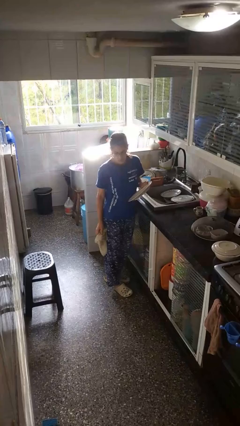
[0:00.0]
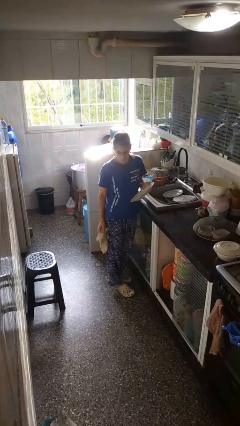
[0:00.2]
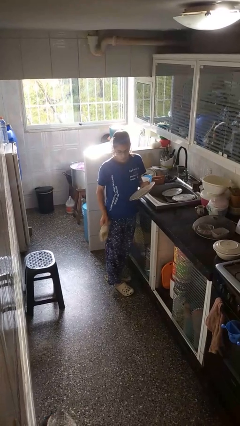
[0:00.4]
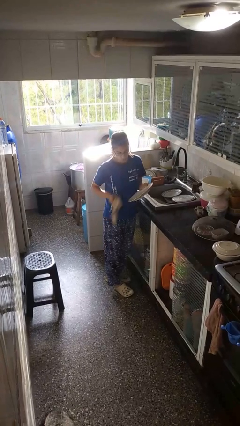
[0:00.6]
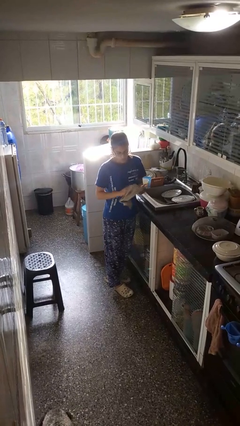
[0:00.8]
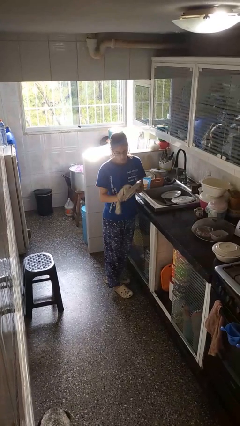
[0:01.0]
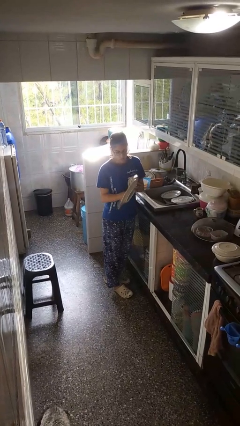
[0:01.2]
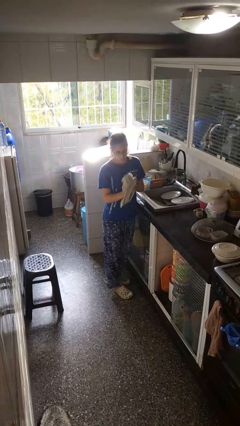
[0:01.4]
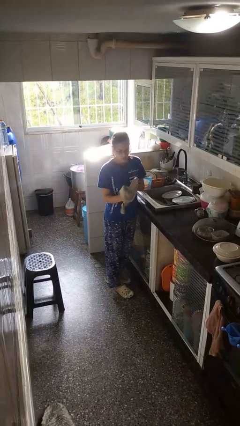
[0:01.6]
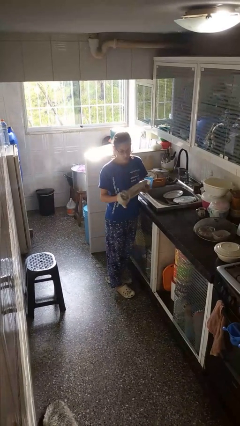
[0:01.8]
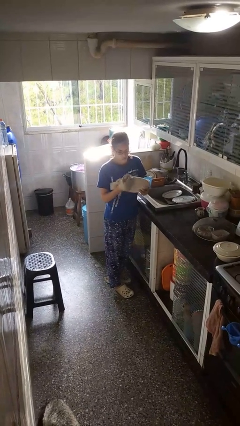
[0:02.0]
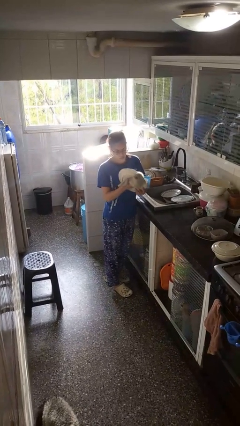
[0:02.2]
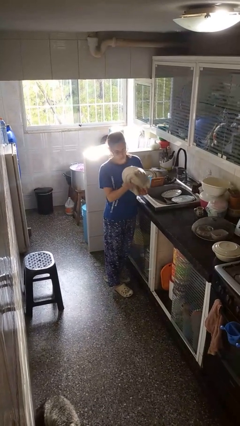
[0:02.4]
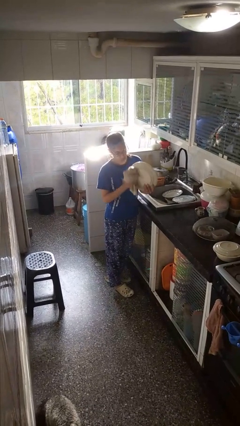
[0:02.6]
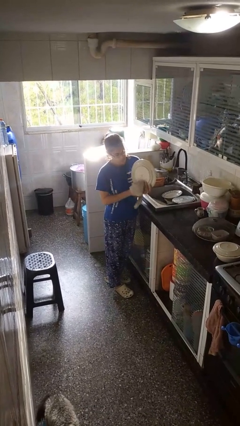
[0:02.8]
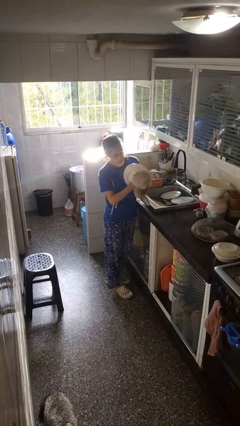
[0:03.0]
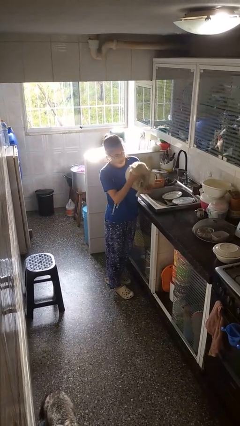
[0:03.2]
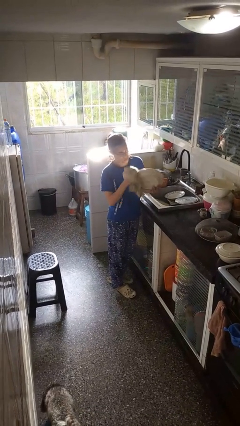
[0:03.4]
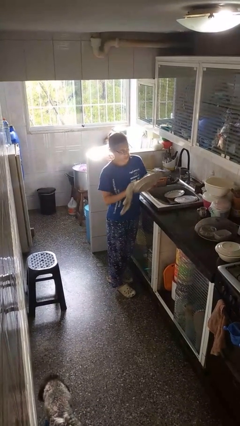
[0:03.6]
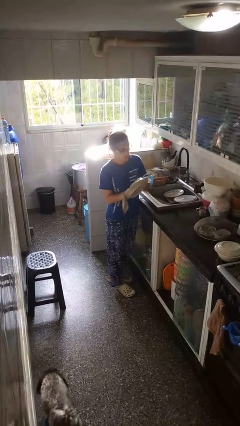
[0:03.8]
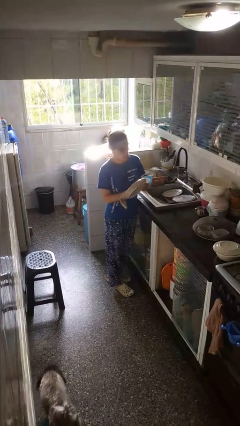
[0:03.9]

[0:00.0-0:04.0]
person dries dish

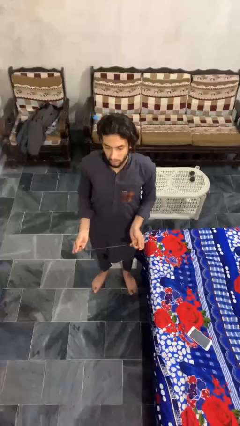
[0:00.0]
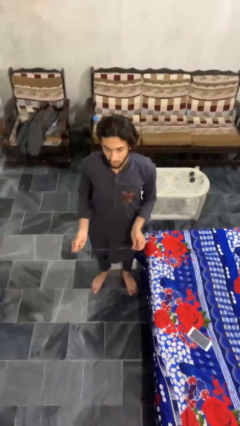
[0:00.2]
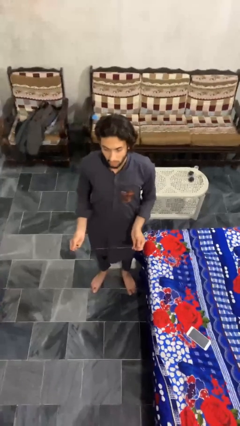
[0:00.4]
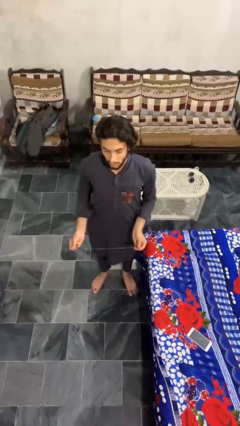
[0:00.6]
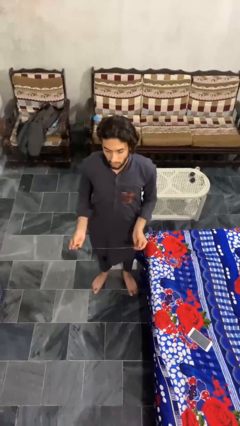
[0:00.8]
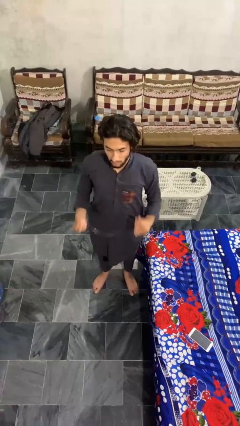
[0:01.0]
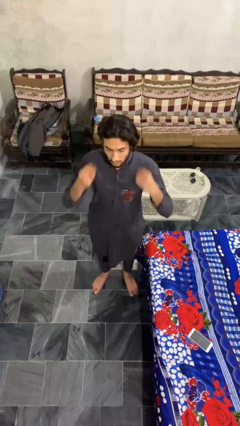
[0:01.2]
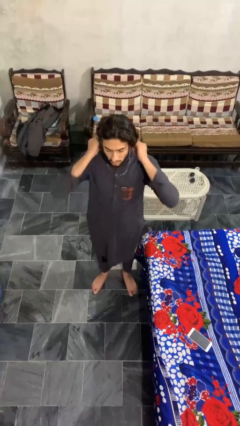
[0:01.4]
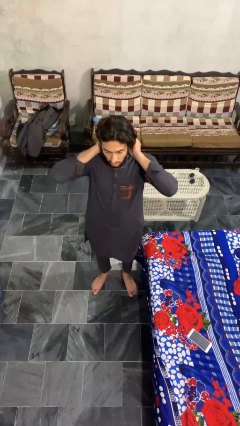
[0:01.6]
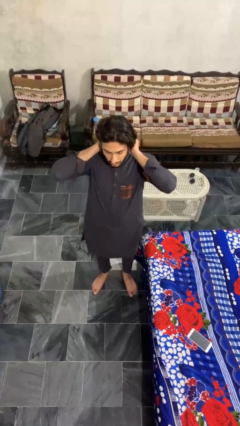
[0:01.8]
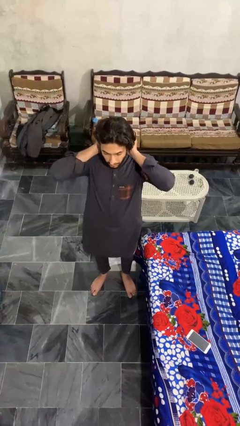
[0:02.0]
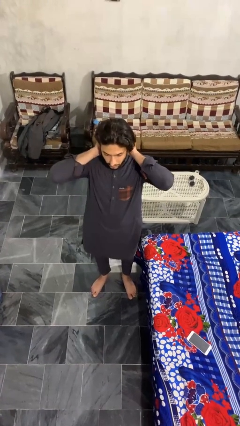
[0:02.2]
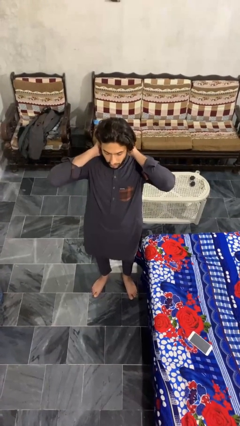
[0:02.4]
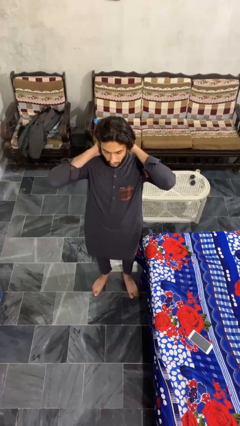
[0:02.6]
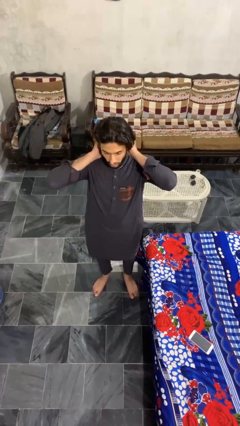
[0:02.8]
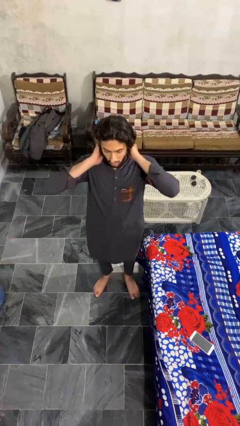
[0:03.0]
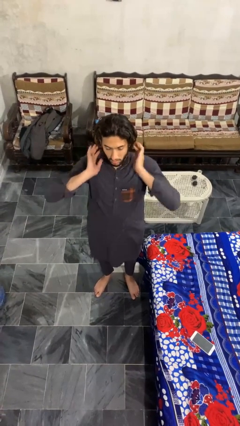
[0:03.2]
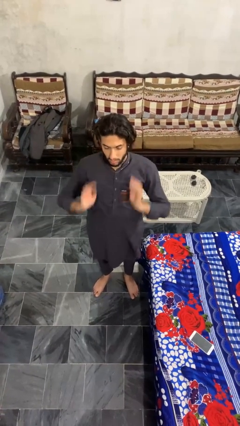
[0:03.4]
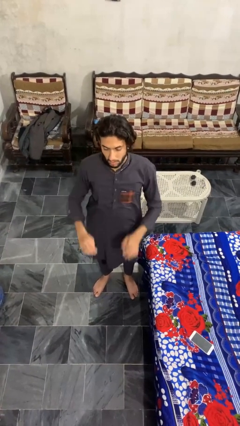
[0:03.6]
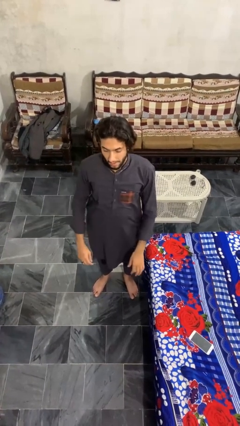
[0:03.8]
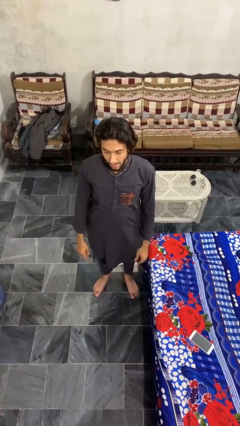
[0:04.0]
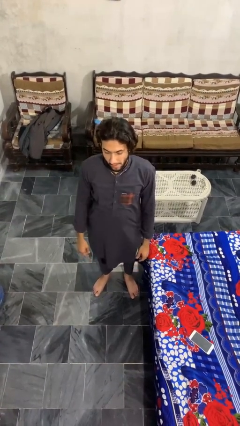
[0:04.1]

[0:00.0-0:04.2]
person puts on necklace

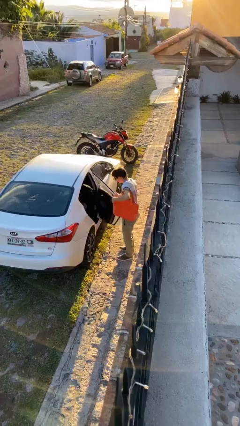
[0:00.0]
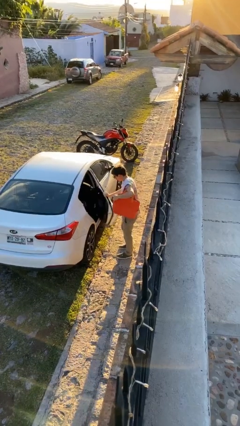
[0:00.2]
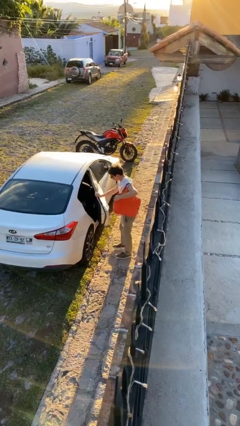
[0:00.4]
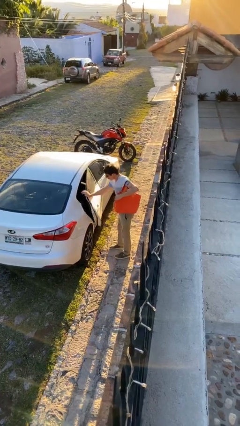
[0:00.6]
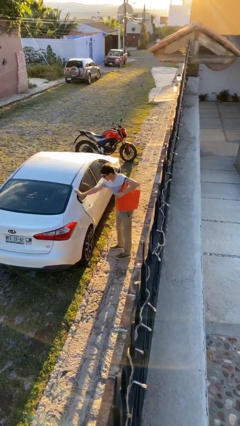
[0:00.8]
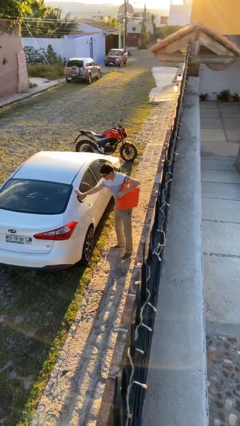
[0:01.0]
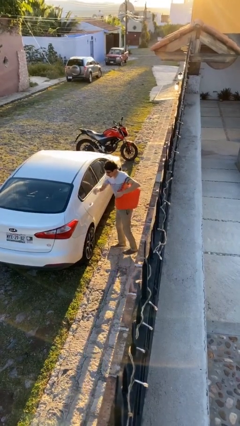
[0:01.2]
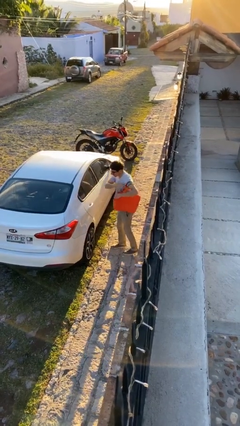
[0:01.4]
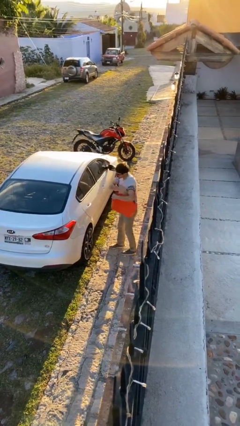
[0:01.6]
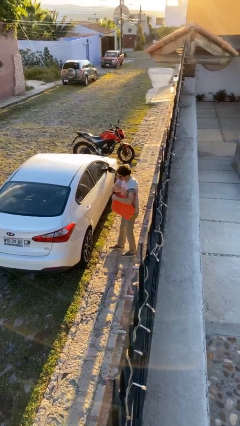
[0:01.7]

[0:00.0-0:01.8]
person closes car door

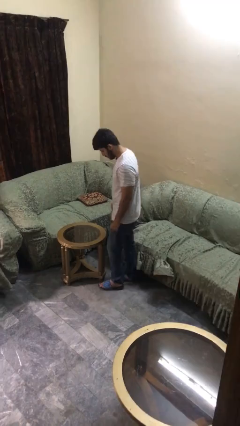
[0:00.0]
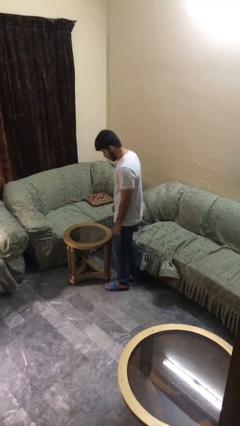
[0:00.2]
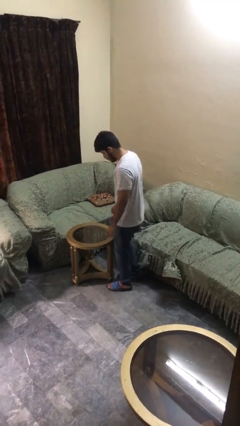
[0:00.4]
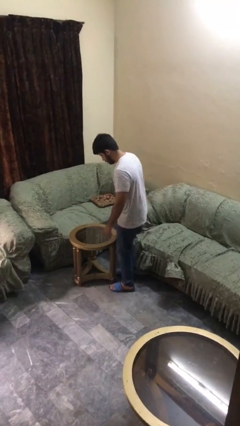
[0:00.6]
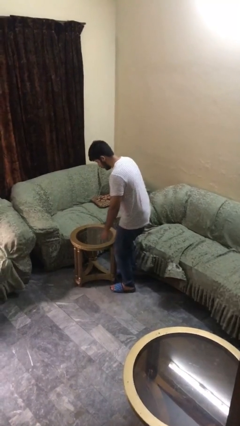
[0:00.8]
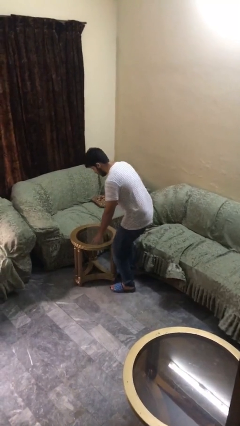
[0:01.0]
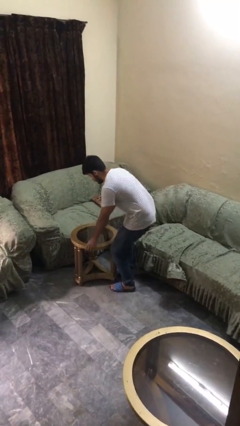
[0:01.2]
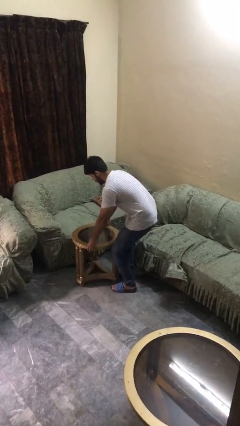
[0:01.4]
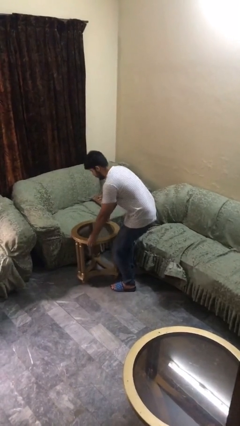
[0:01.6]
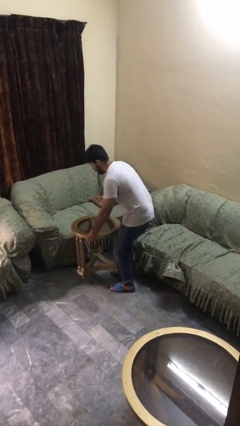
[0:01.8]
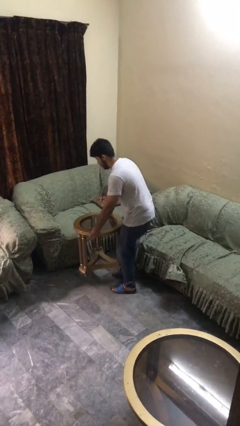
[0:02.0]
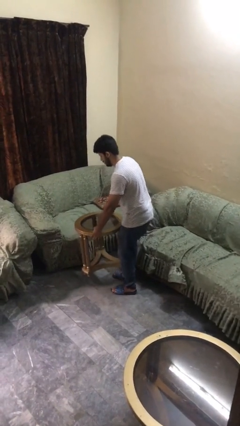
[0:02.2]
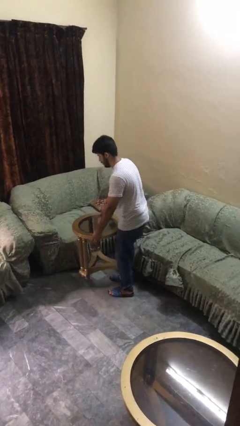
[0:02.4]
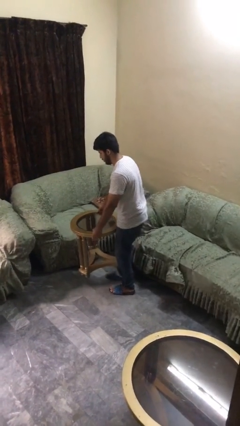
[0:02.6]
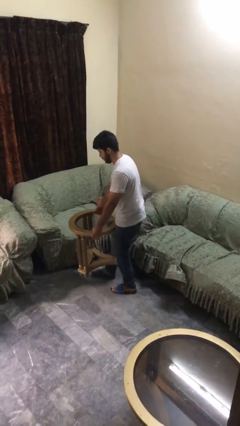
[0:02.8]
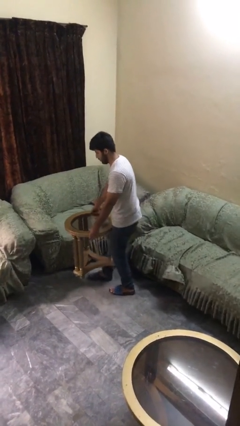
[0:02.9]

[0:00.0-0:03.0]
person picks up object from floor

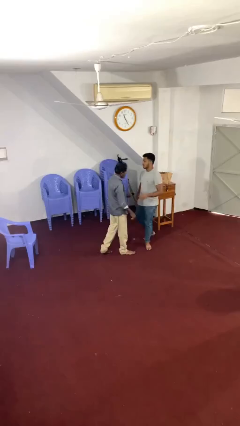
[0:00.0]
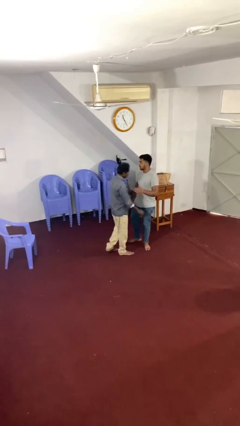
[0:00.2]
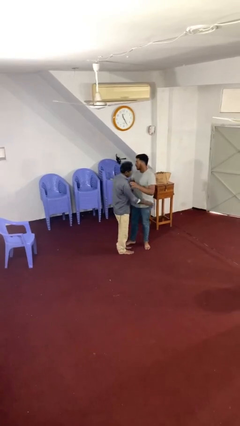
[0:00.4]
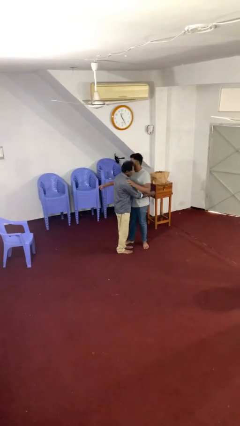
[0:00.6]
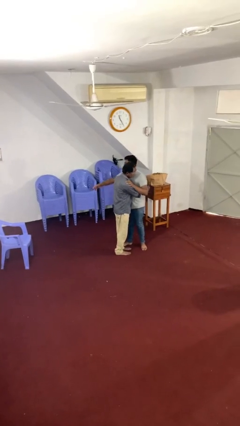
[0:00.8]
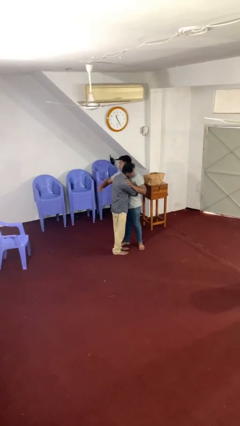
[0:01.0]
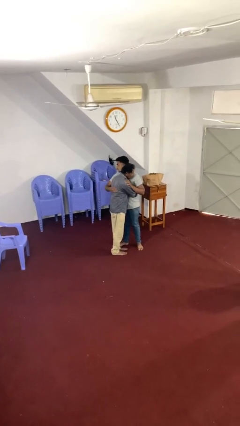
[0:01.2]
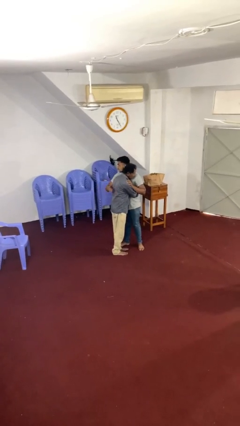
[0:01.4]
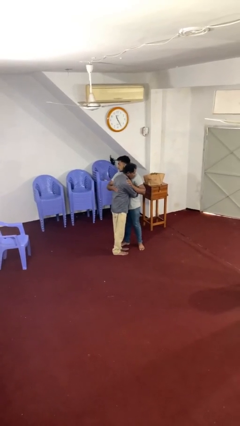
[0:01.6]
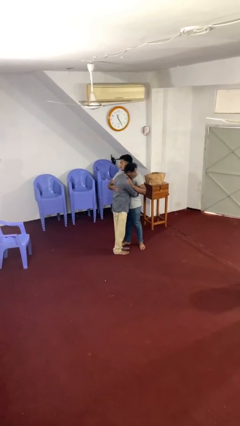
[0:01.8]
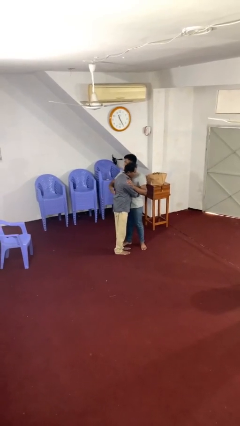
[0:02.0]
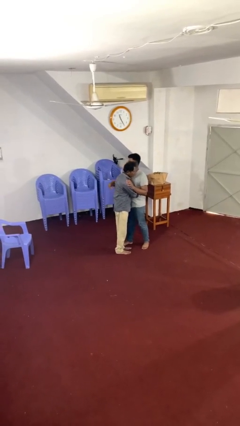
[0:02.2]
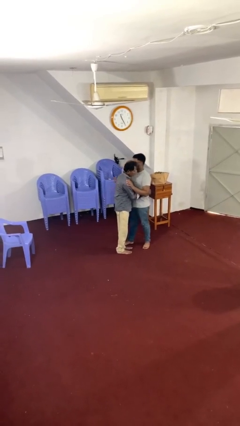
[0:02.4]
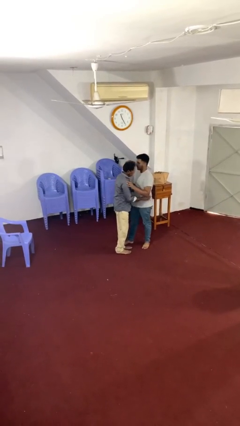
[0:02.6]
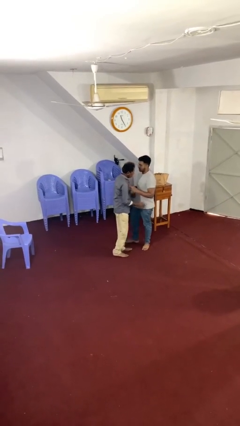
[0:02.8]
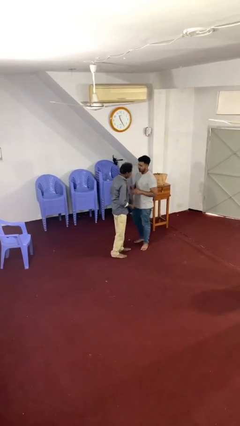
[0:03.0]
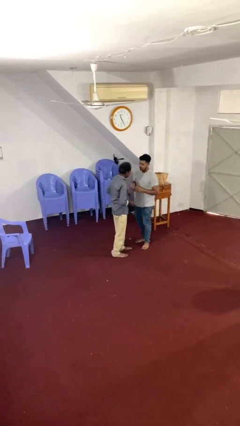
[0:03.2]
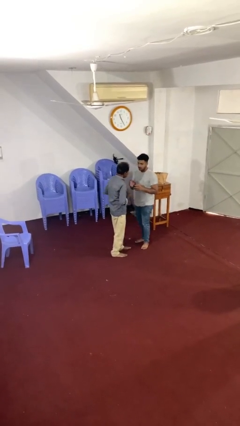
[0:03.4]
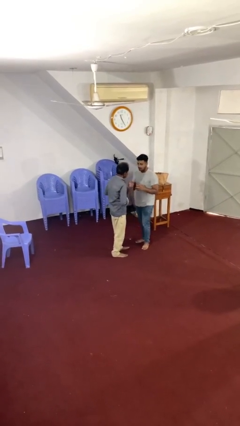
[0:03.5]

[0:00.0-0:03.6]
person embraces person

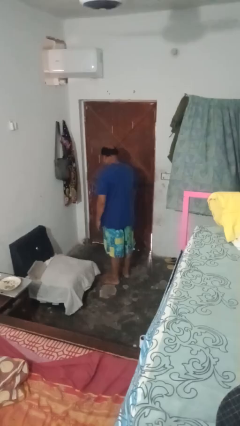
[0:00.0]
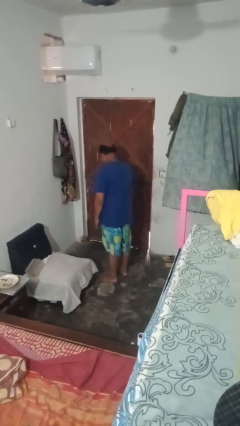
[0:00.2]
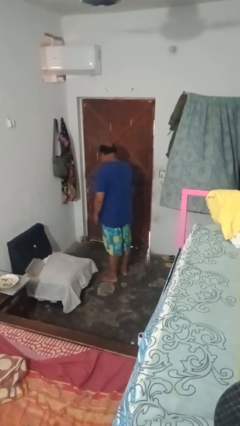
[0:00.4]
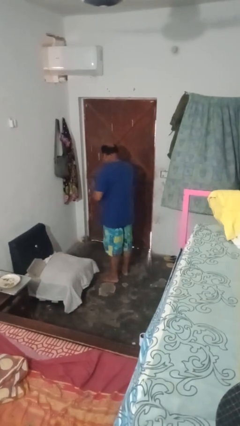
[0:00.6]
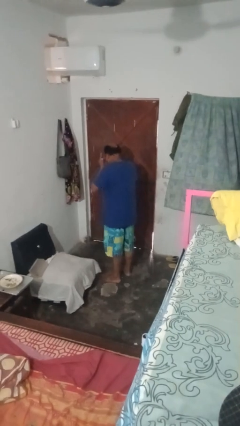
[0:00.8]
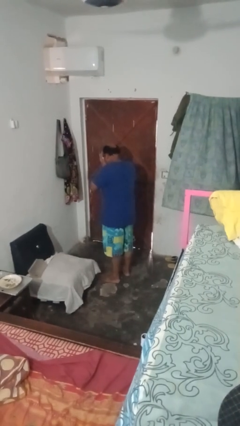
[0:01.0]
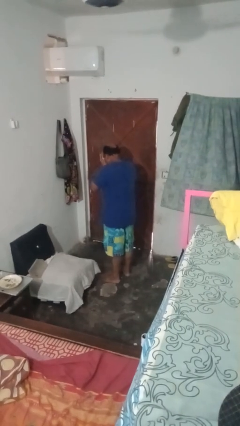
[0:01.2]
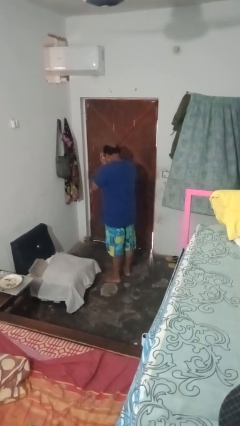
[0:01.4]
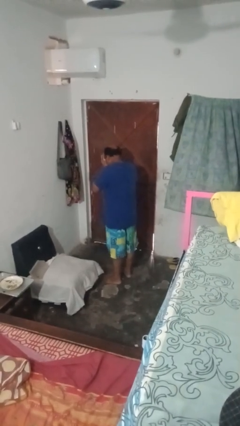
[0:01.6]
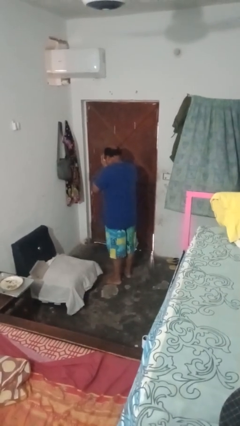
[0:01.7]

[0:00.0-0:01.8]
person covers face with hands
